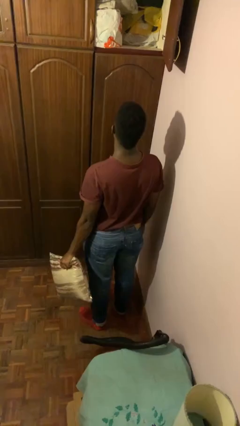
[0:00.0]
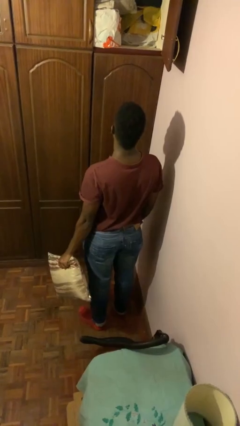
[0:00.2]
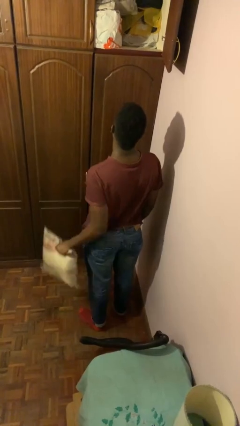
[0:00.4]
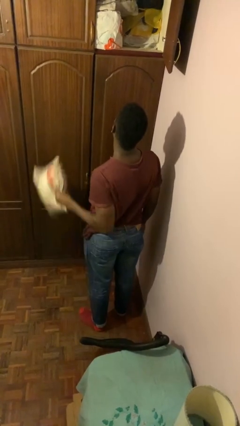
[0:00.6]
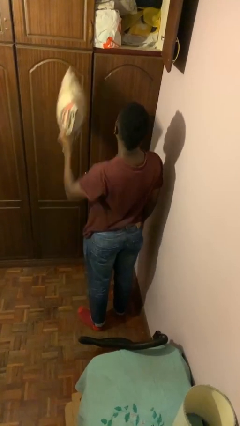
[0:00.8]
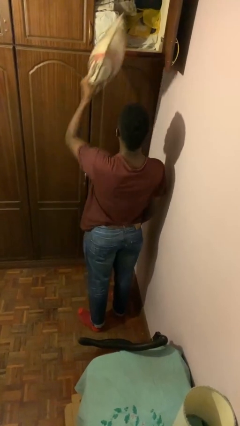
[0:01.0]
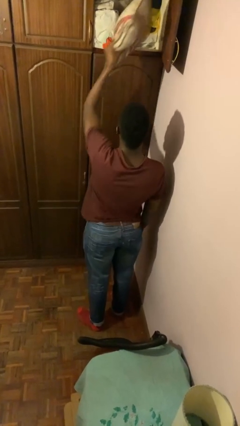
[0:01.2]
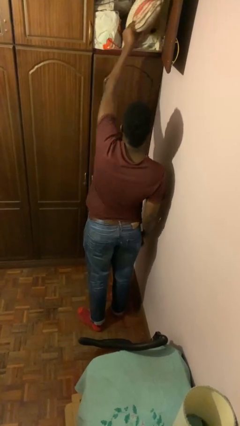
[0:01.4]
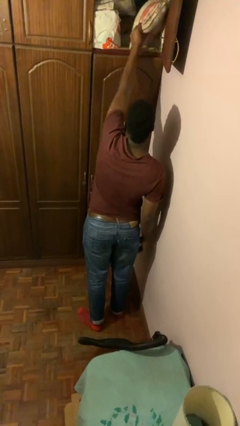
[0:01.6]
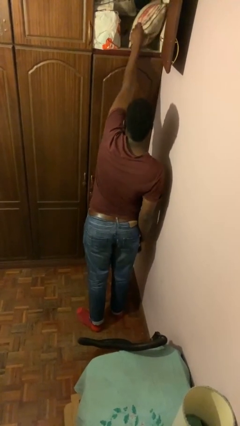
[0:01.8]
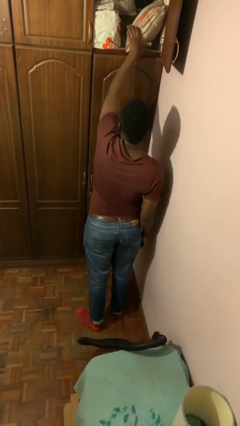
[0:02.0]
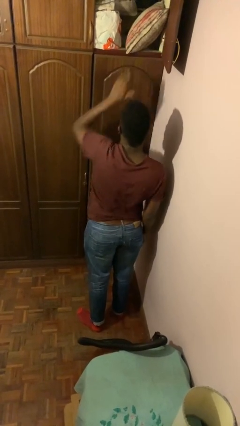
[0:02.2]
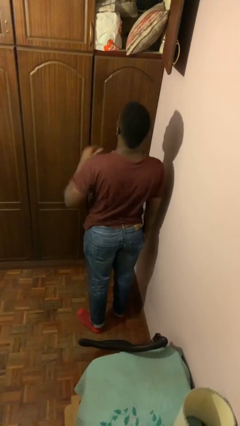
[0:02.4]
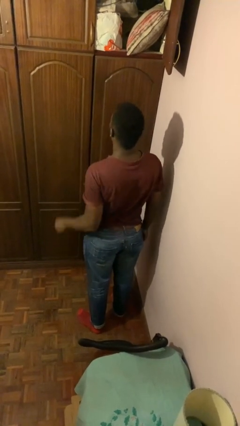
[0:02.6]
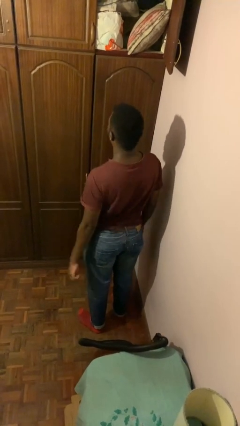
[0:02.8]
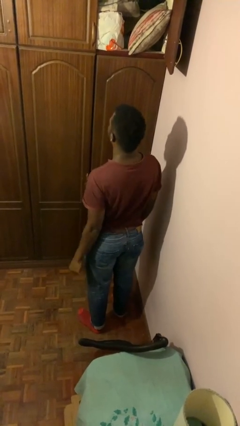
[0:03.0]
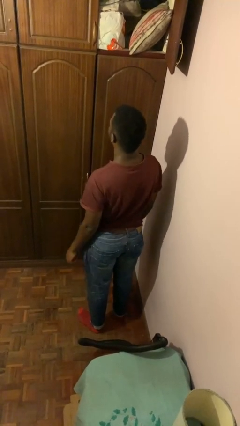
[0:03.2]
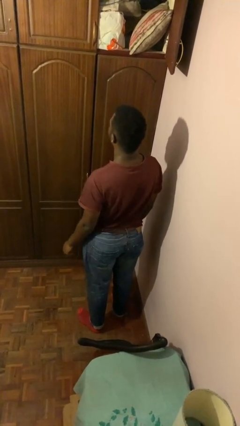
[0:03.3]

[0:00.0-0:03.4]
person puts down object on shelf

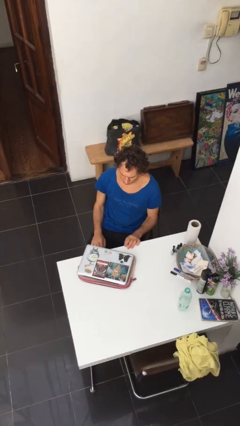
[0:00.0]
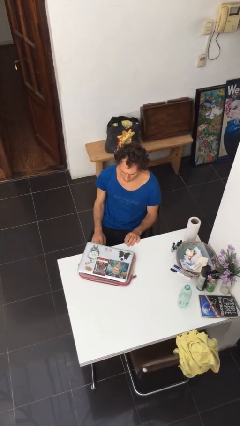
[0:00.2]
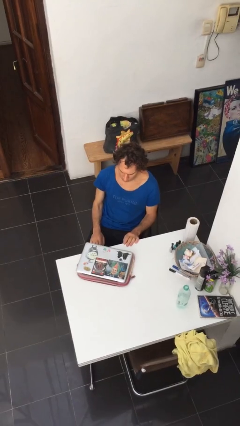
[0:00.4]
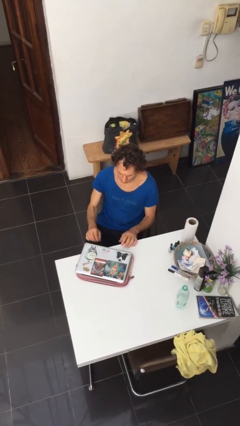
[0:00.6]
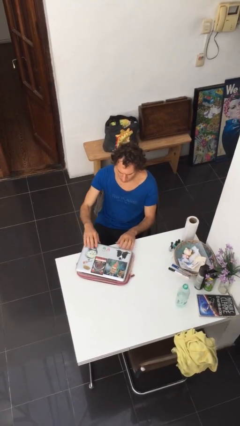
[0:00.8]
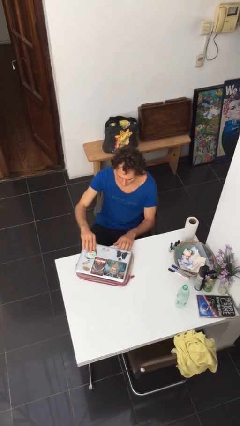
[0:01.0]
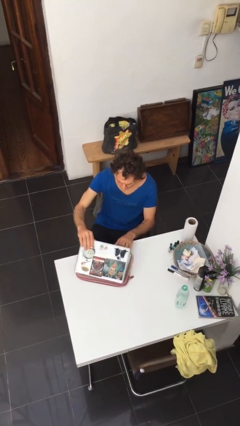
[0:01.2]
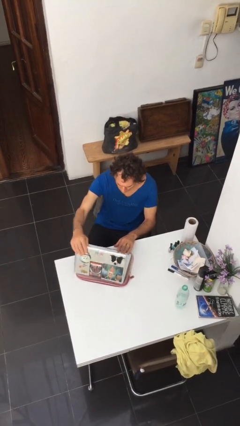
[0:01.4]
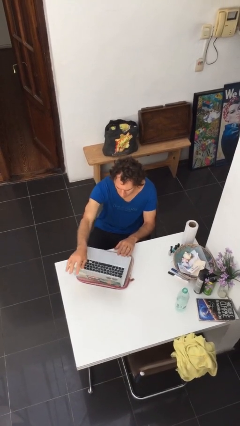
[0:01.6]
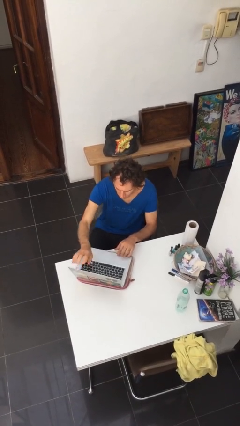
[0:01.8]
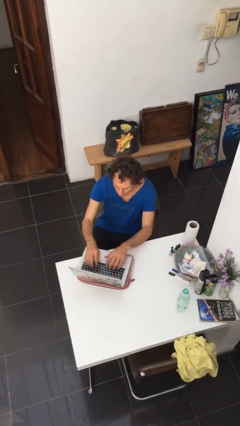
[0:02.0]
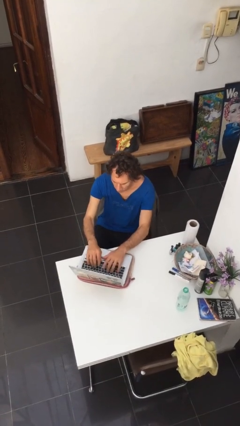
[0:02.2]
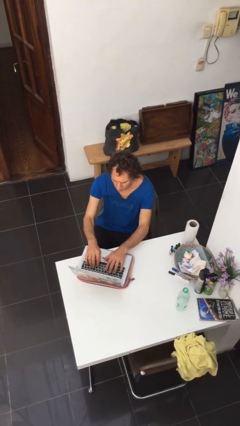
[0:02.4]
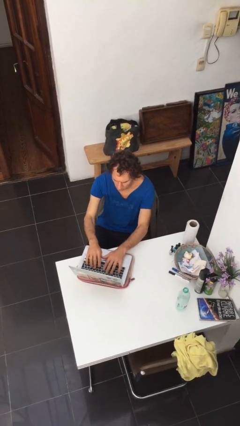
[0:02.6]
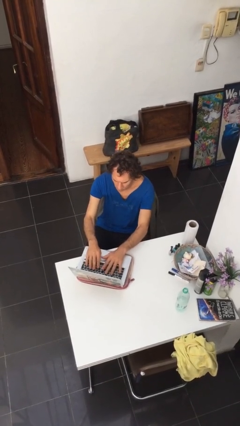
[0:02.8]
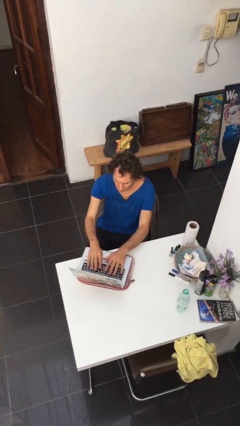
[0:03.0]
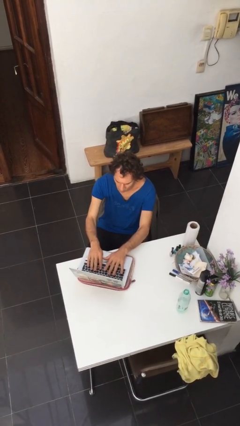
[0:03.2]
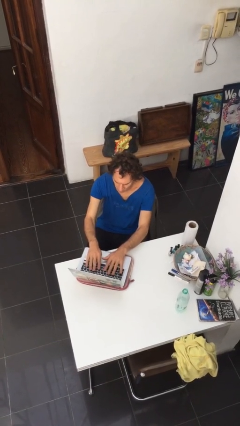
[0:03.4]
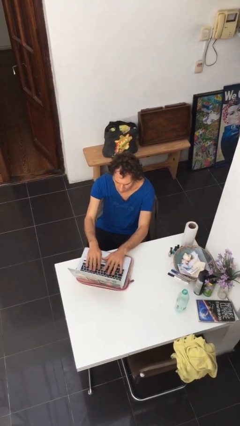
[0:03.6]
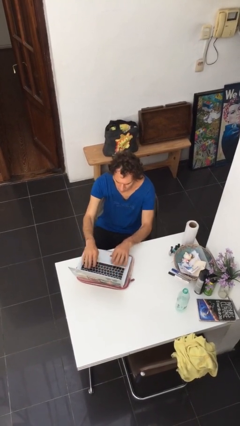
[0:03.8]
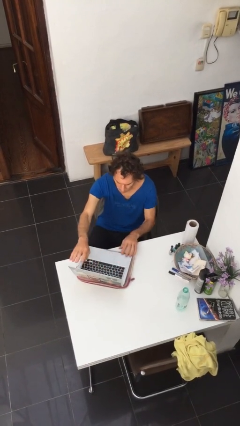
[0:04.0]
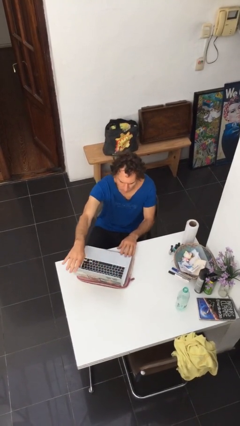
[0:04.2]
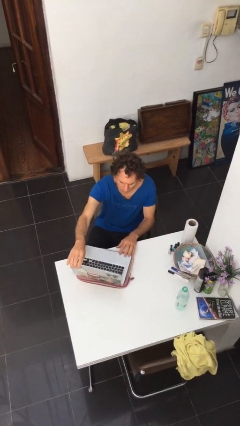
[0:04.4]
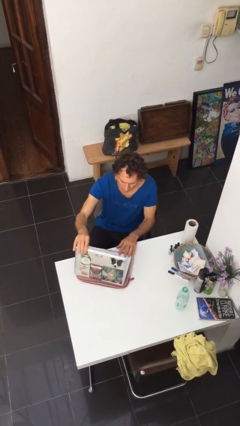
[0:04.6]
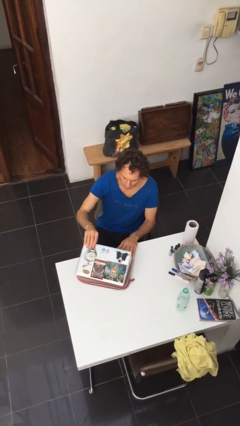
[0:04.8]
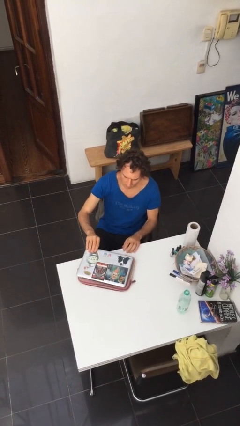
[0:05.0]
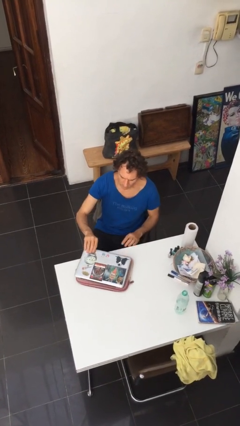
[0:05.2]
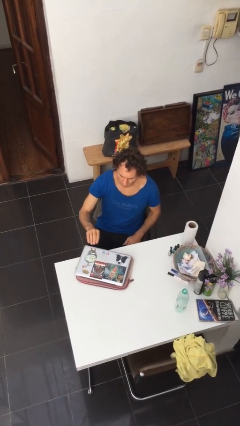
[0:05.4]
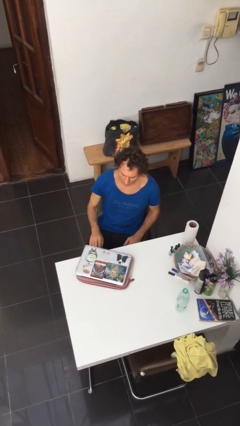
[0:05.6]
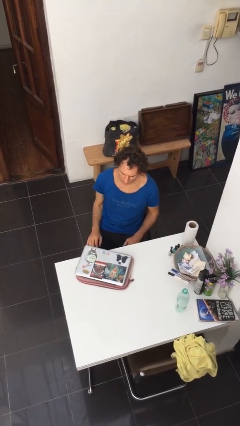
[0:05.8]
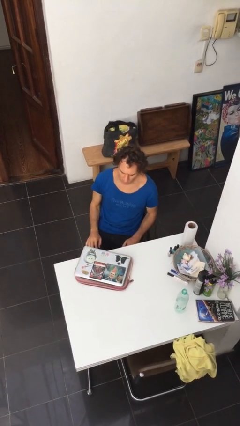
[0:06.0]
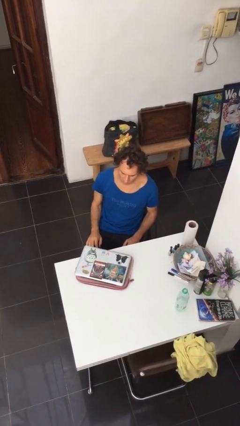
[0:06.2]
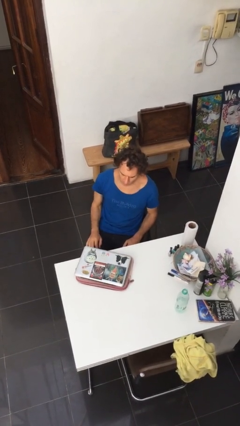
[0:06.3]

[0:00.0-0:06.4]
person interacts with laptop

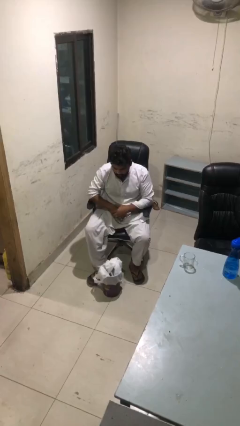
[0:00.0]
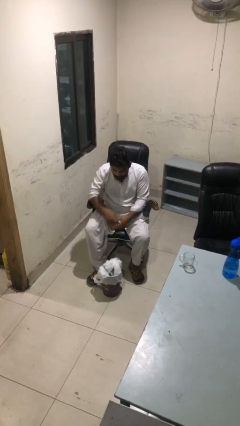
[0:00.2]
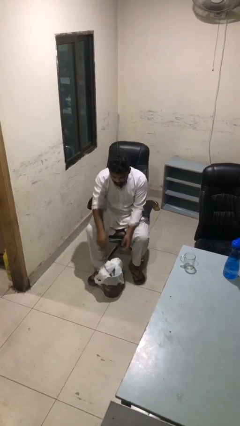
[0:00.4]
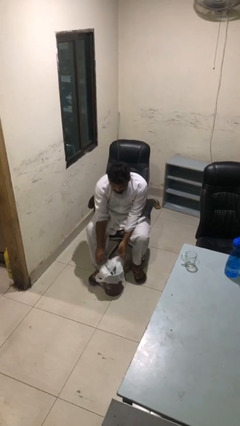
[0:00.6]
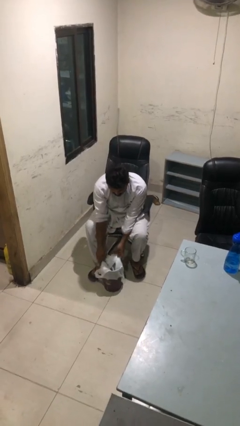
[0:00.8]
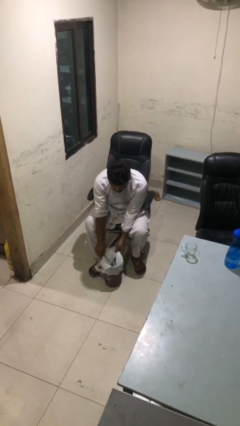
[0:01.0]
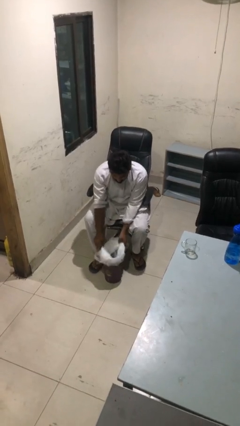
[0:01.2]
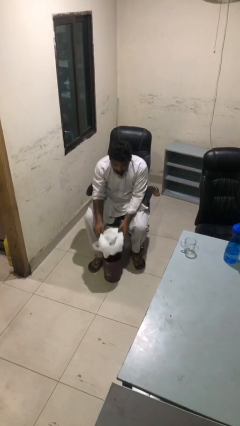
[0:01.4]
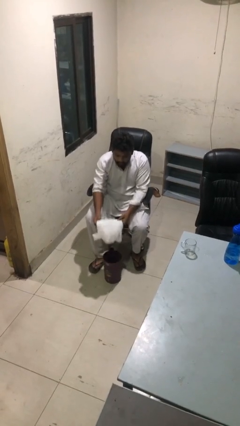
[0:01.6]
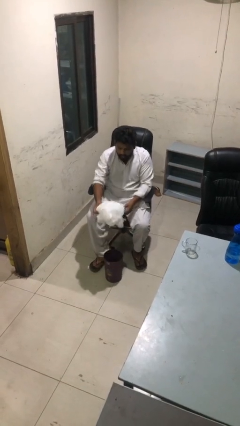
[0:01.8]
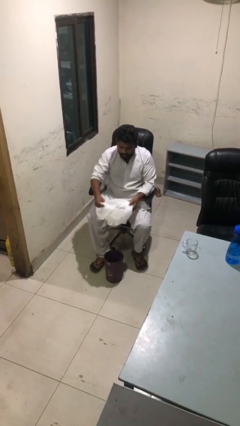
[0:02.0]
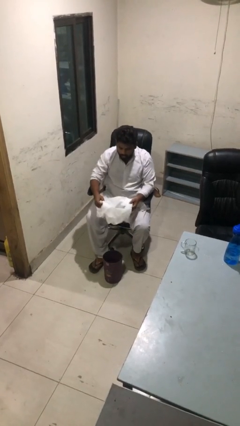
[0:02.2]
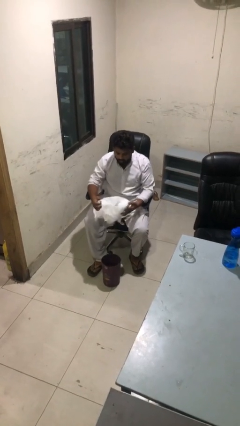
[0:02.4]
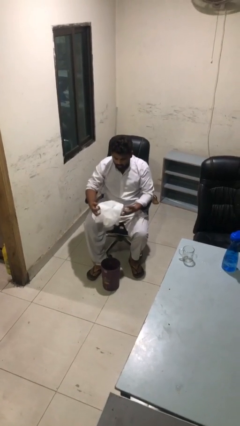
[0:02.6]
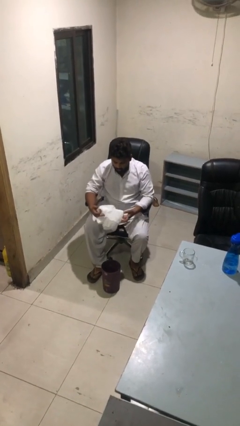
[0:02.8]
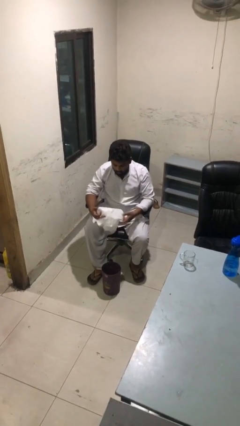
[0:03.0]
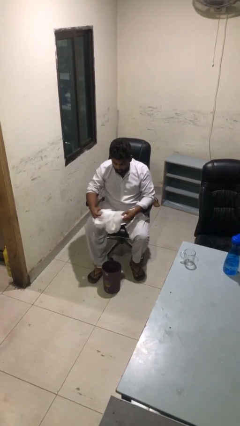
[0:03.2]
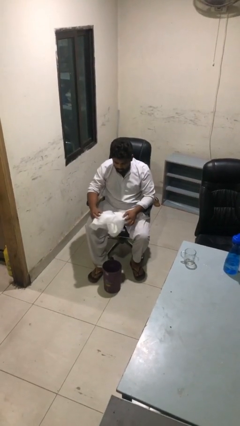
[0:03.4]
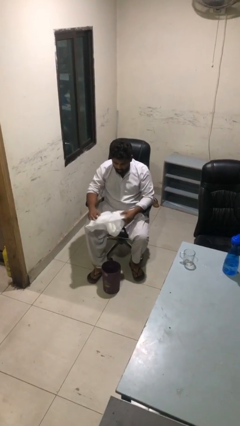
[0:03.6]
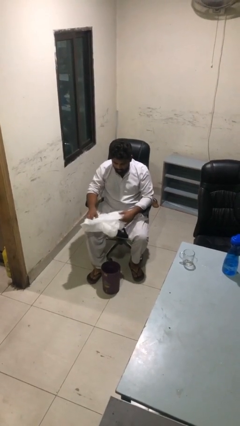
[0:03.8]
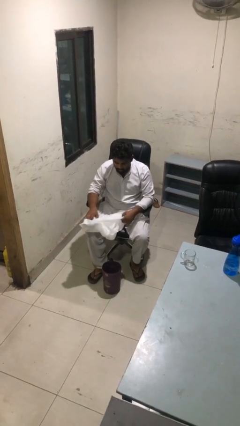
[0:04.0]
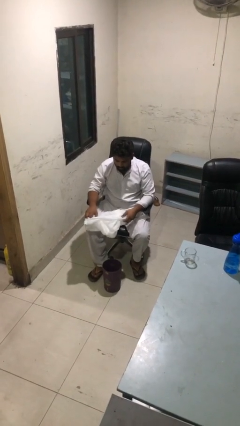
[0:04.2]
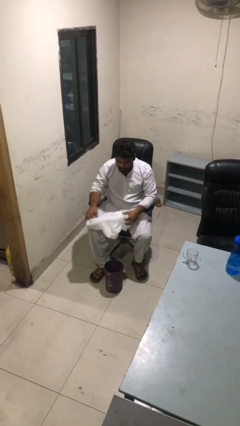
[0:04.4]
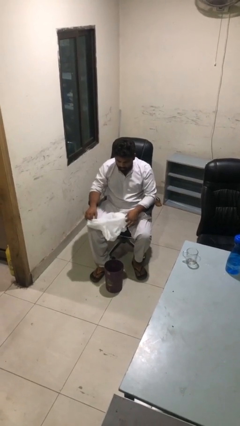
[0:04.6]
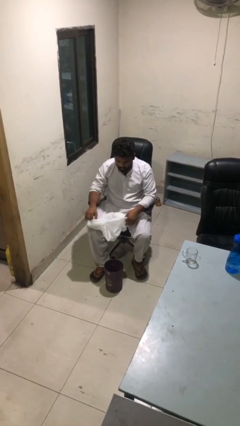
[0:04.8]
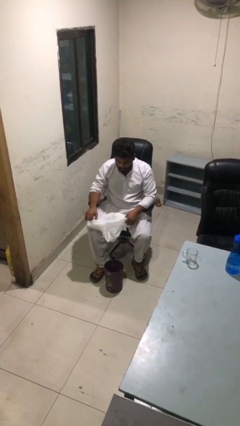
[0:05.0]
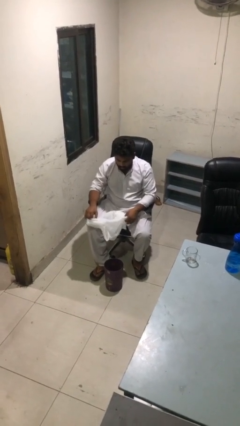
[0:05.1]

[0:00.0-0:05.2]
person removes trashbag from trashcan

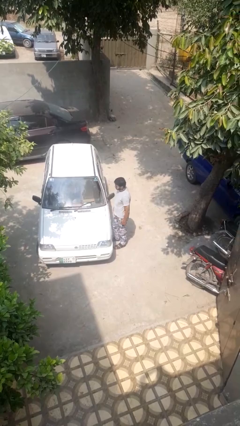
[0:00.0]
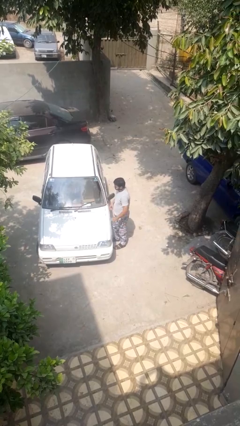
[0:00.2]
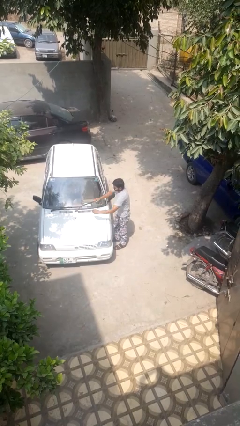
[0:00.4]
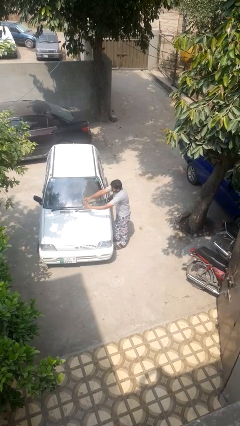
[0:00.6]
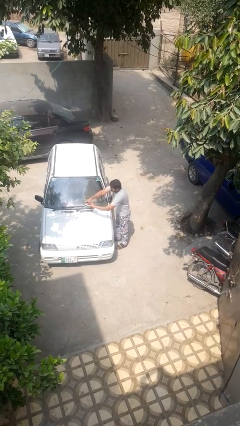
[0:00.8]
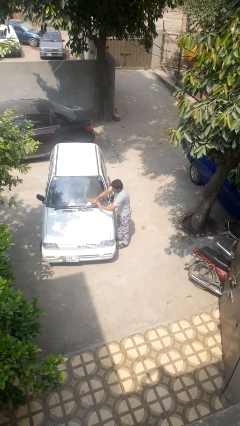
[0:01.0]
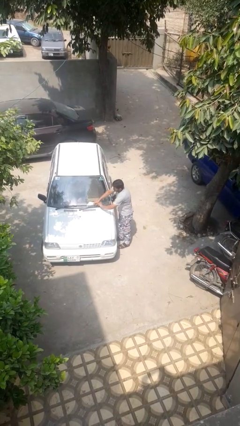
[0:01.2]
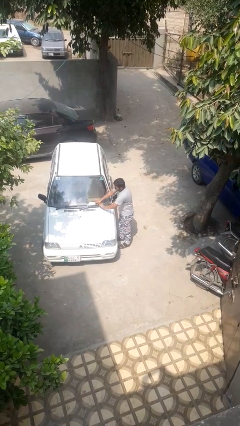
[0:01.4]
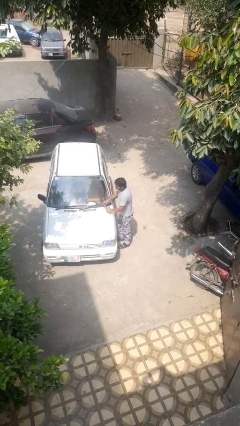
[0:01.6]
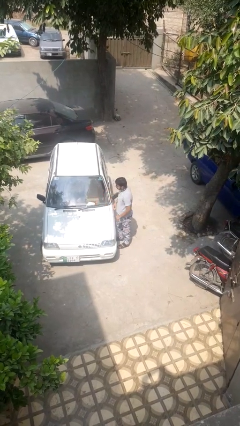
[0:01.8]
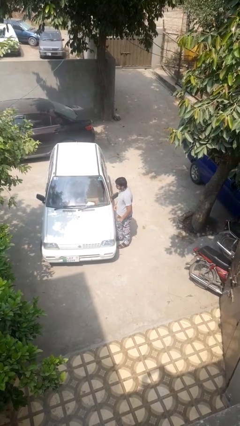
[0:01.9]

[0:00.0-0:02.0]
person flips down car wipers

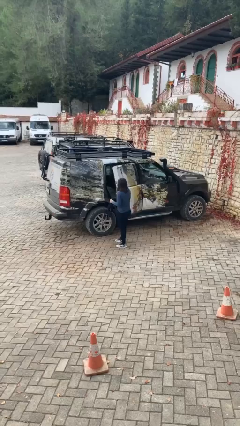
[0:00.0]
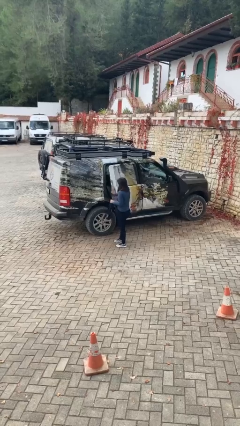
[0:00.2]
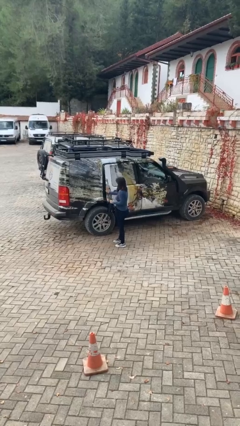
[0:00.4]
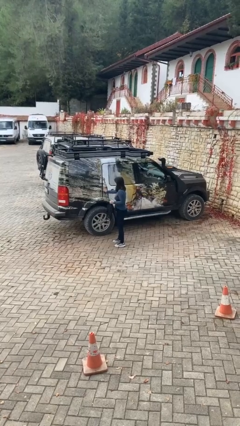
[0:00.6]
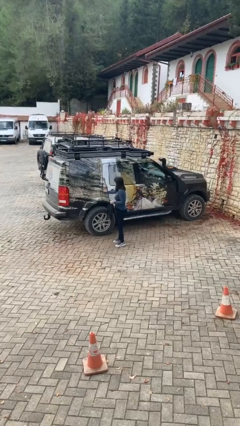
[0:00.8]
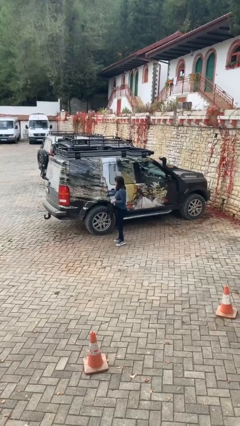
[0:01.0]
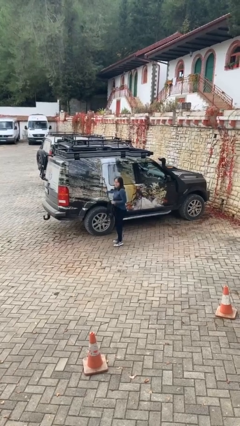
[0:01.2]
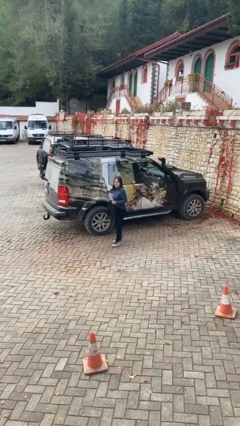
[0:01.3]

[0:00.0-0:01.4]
person closes car door
